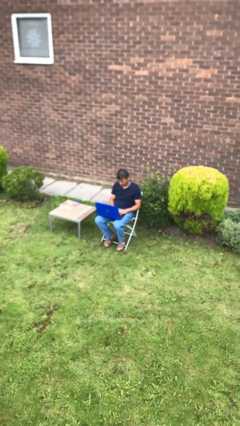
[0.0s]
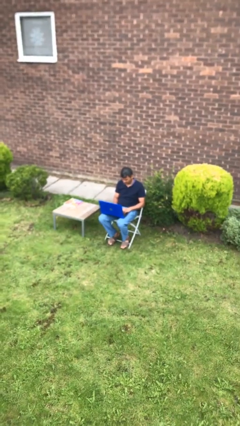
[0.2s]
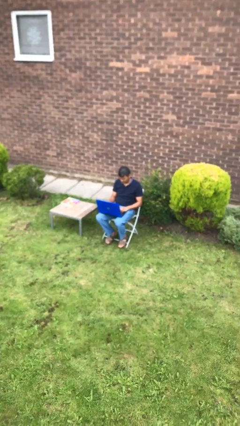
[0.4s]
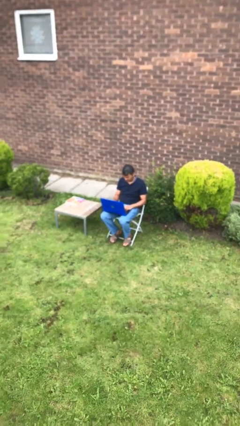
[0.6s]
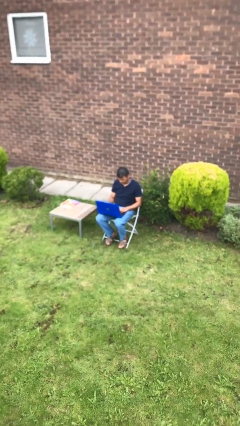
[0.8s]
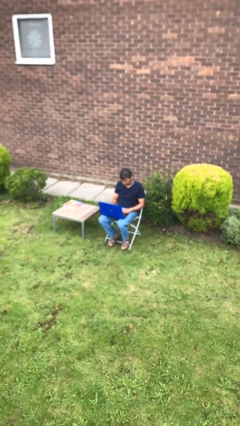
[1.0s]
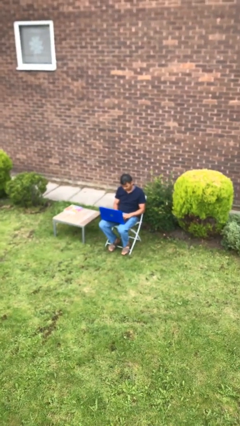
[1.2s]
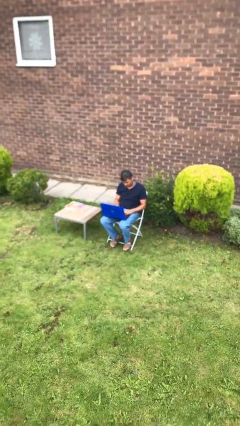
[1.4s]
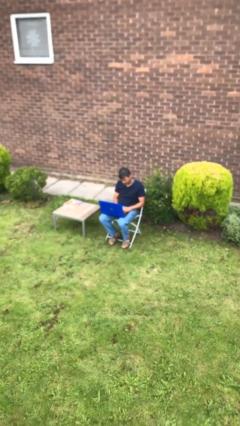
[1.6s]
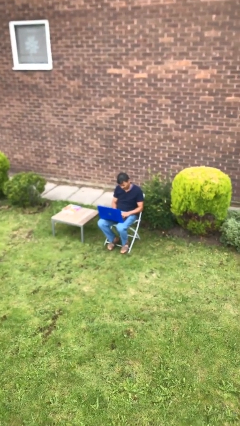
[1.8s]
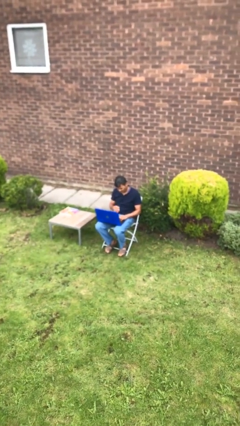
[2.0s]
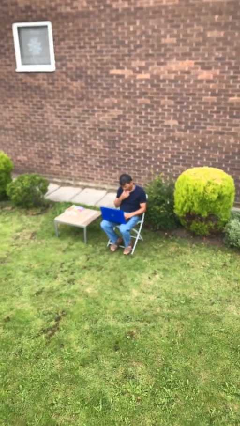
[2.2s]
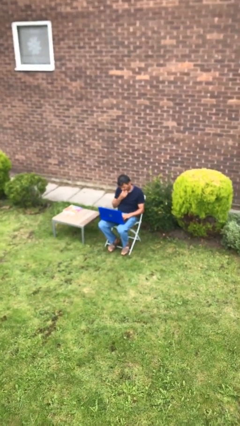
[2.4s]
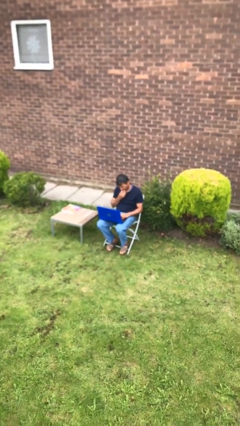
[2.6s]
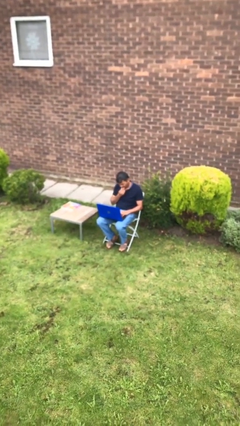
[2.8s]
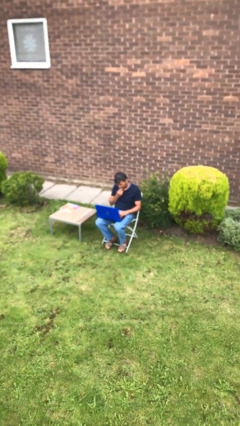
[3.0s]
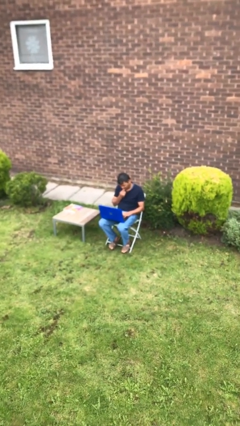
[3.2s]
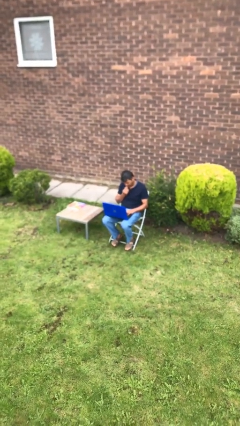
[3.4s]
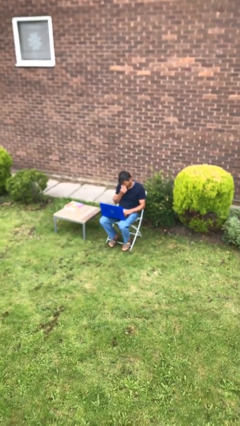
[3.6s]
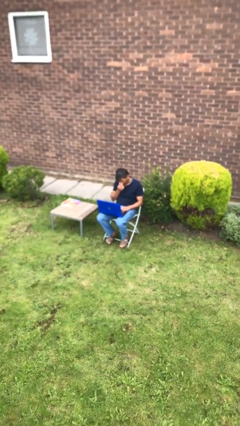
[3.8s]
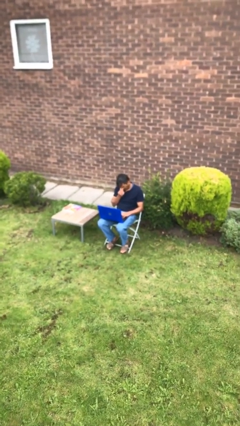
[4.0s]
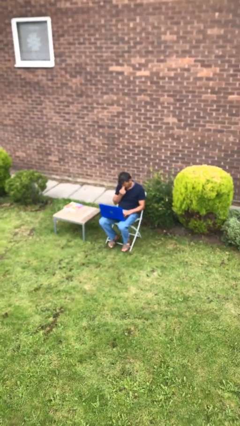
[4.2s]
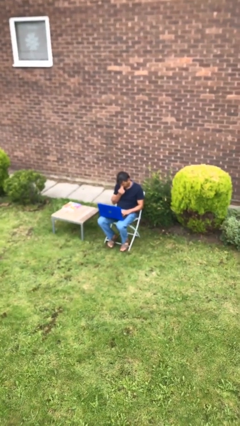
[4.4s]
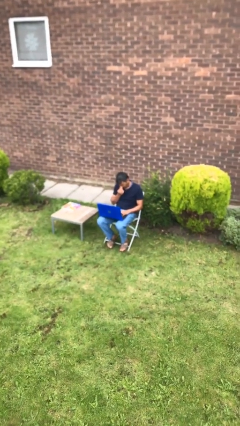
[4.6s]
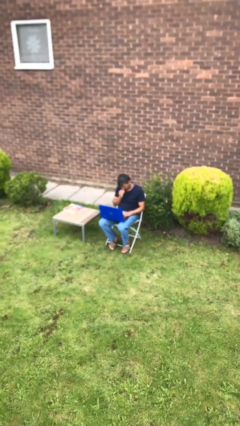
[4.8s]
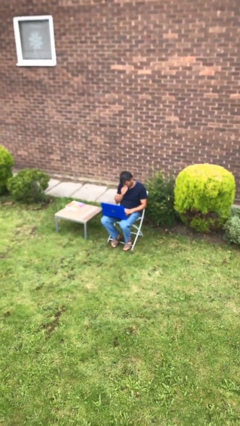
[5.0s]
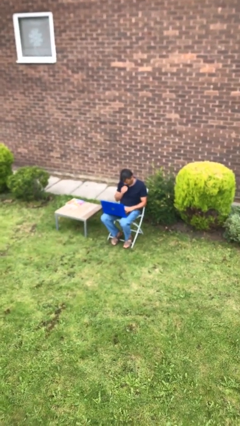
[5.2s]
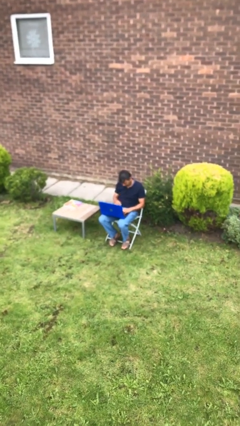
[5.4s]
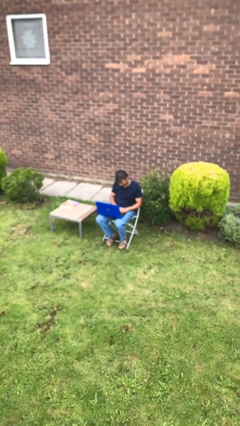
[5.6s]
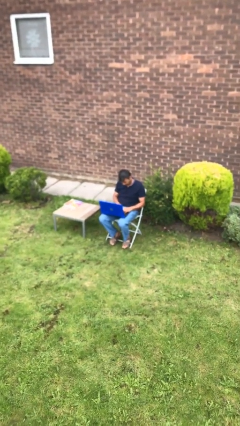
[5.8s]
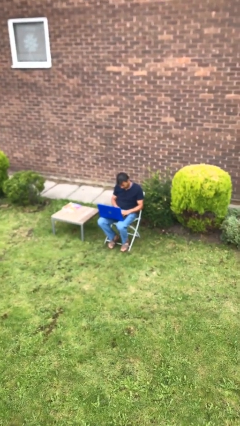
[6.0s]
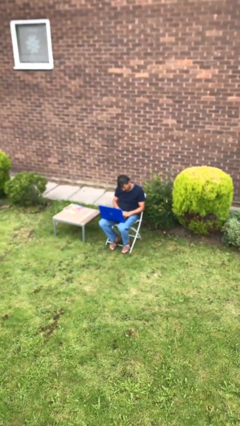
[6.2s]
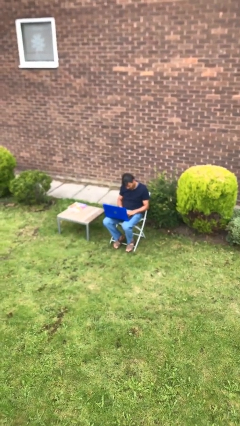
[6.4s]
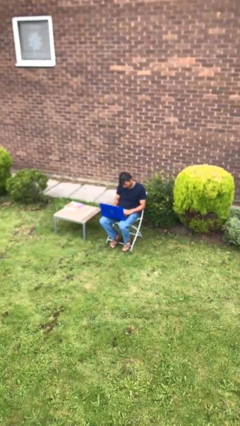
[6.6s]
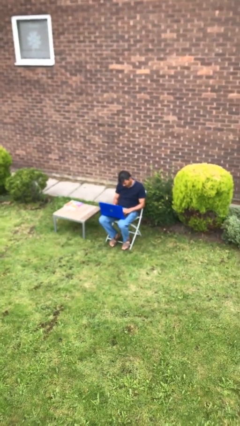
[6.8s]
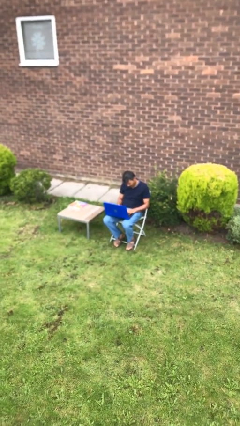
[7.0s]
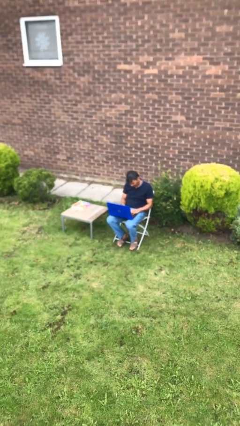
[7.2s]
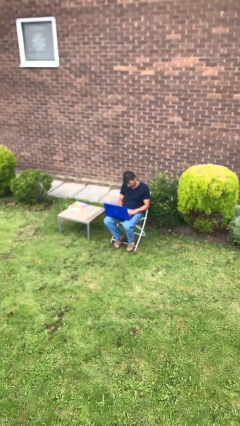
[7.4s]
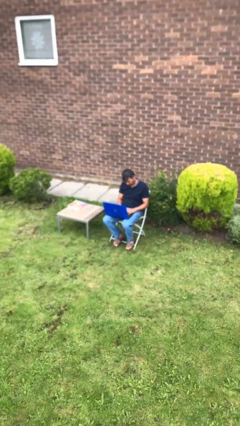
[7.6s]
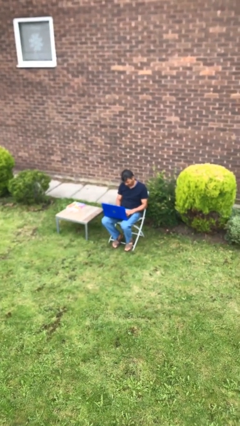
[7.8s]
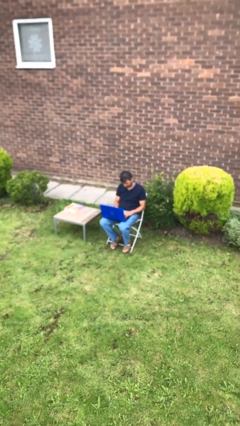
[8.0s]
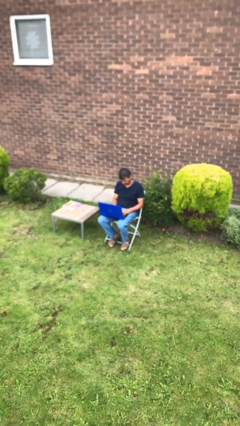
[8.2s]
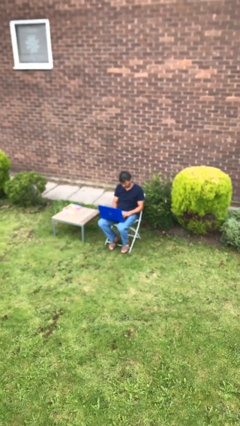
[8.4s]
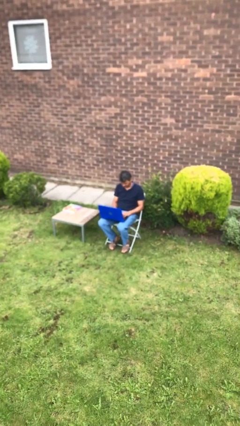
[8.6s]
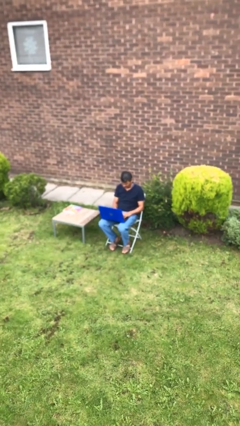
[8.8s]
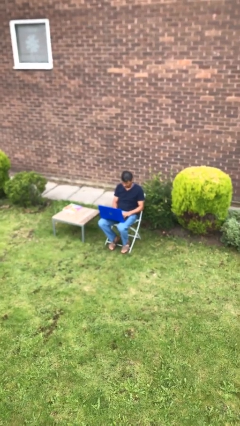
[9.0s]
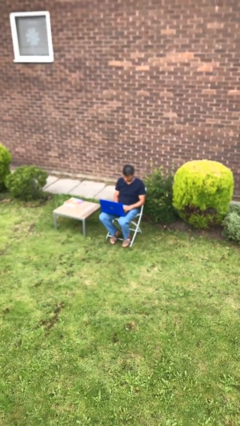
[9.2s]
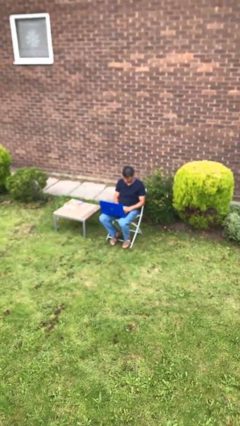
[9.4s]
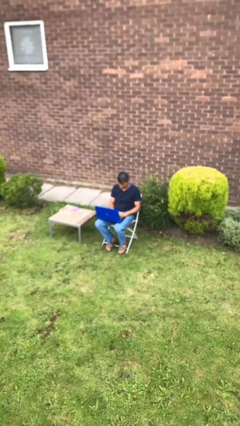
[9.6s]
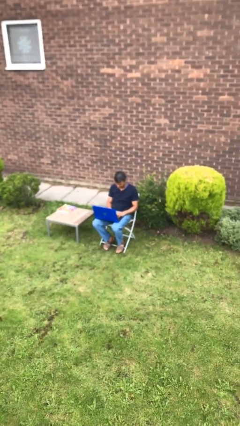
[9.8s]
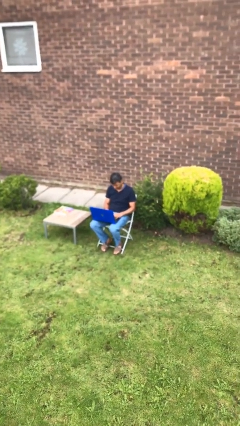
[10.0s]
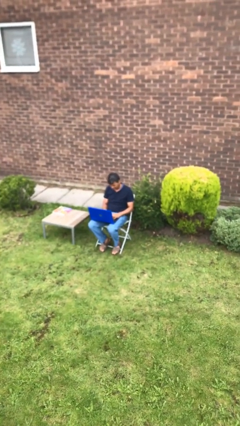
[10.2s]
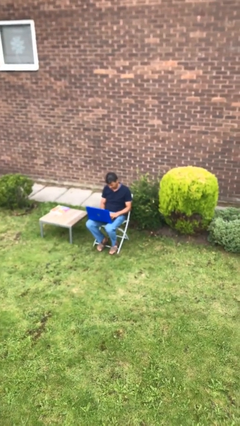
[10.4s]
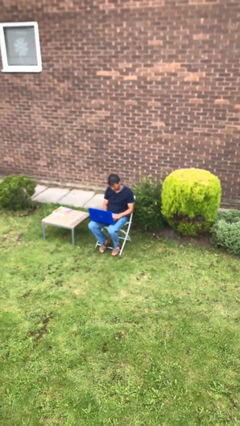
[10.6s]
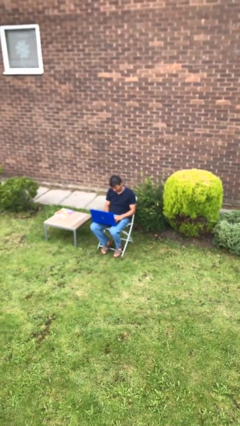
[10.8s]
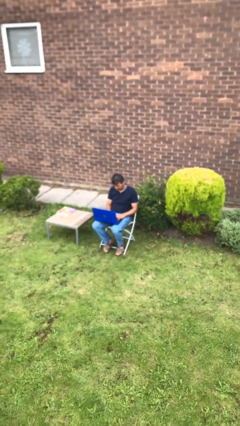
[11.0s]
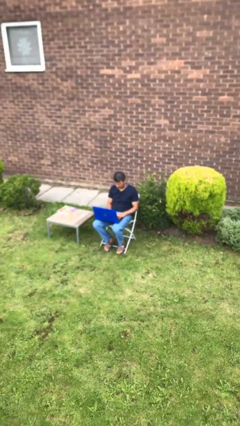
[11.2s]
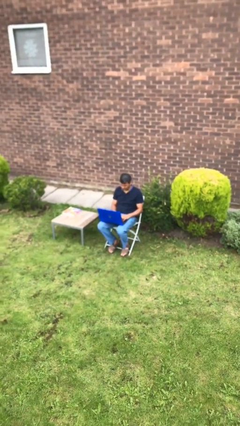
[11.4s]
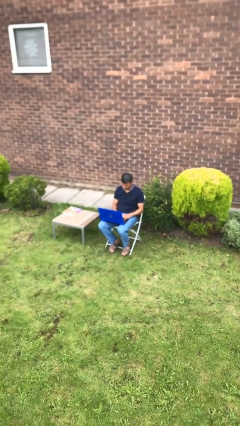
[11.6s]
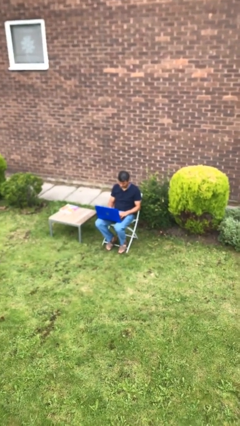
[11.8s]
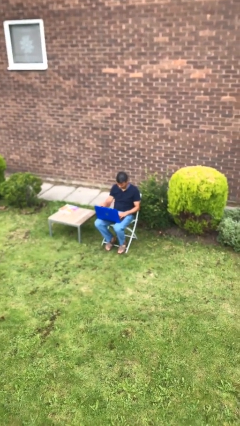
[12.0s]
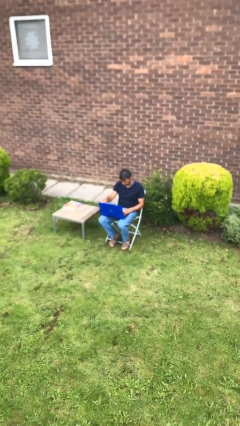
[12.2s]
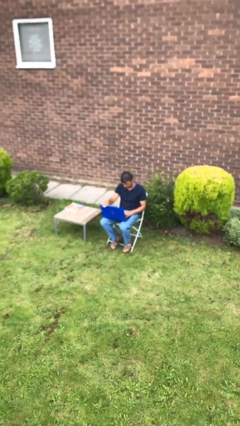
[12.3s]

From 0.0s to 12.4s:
person interacts with laptop

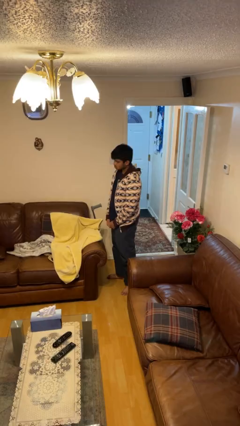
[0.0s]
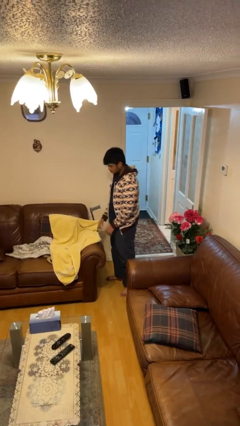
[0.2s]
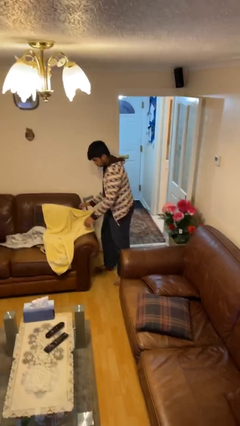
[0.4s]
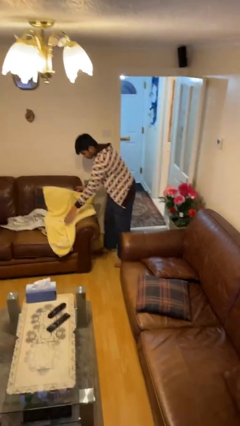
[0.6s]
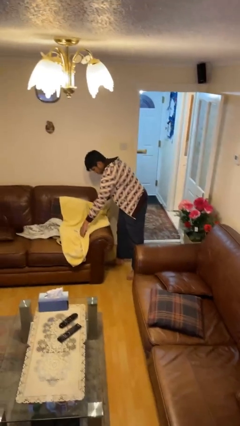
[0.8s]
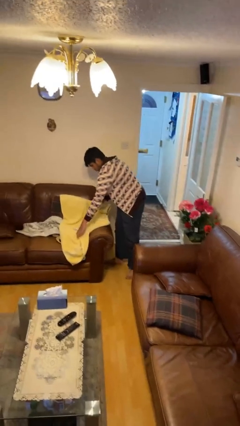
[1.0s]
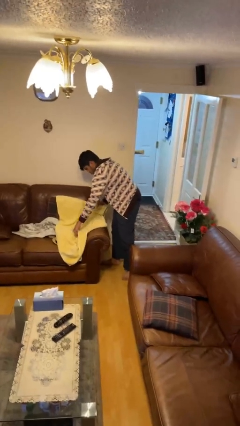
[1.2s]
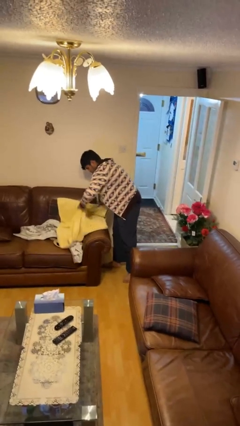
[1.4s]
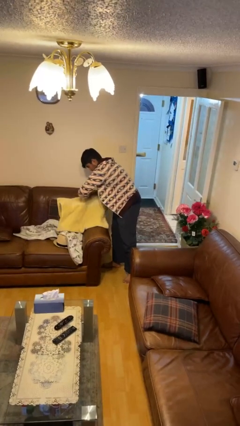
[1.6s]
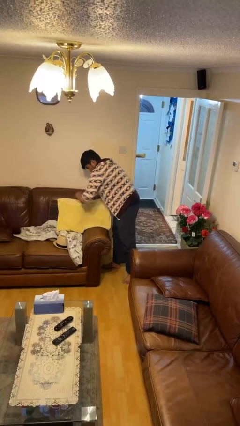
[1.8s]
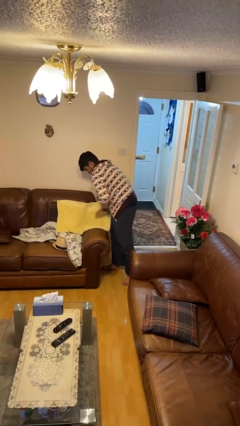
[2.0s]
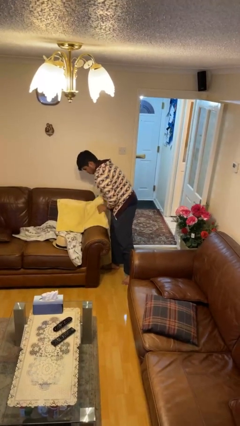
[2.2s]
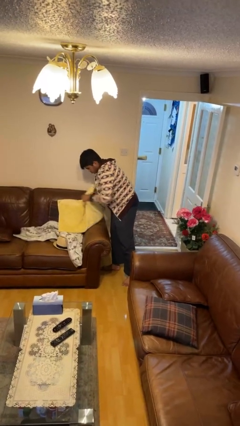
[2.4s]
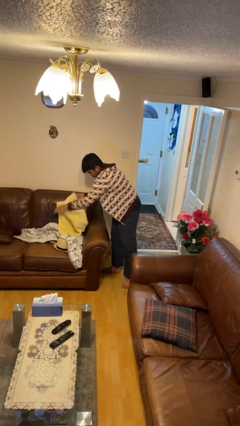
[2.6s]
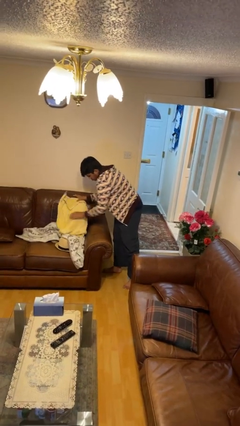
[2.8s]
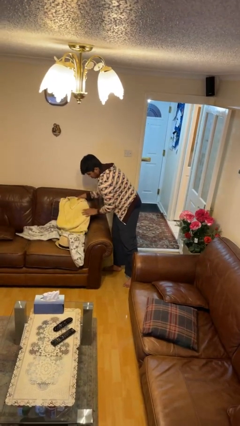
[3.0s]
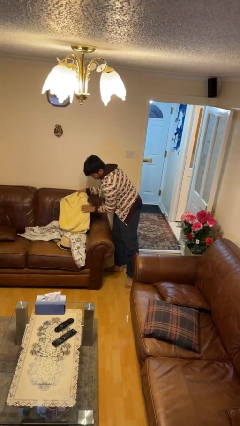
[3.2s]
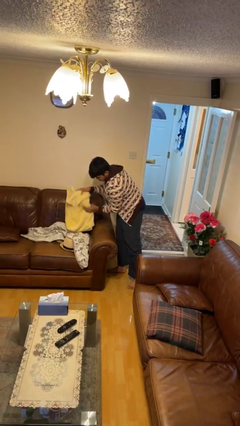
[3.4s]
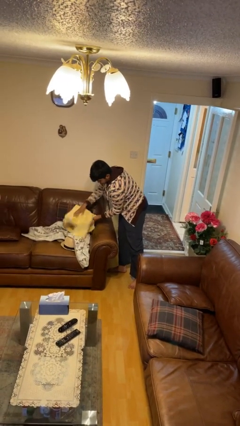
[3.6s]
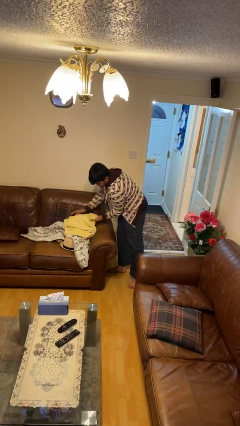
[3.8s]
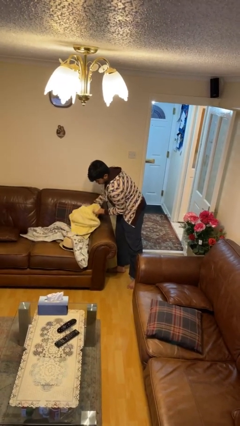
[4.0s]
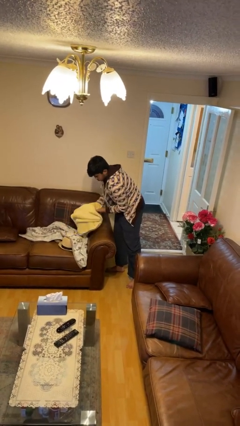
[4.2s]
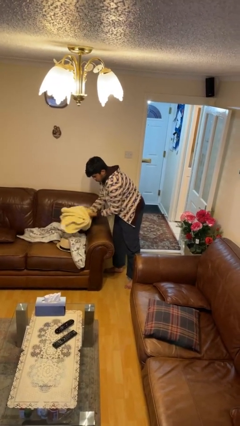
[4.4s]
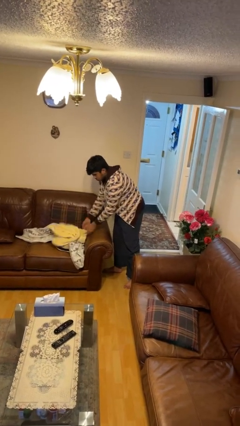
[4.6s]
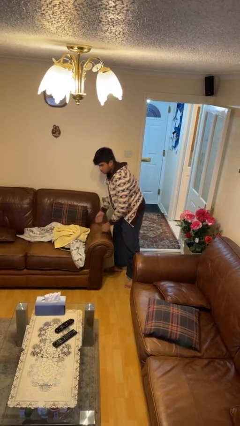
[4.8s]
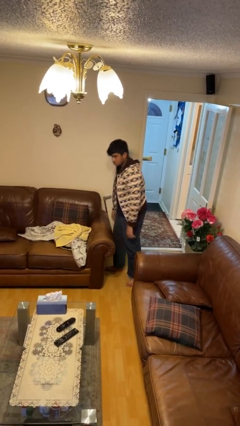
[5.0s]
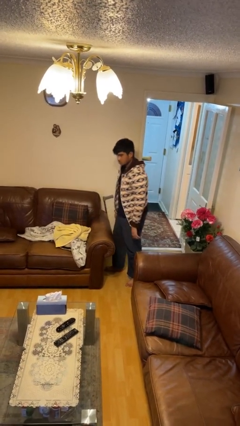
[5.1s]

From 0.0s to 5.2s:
person folds towel

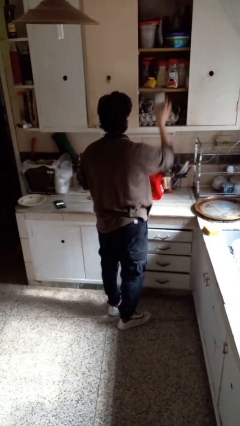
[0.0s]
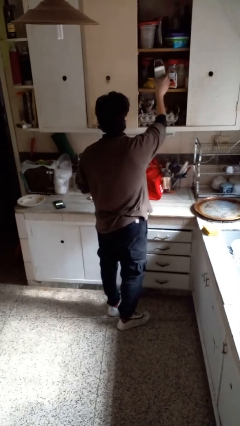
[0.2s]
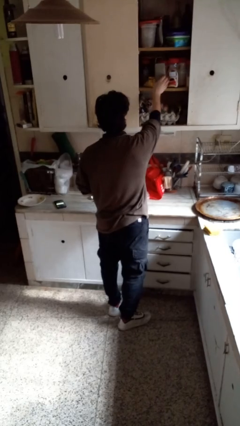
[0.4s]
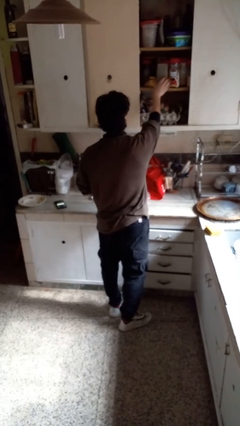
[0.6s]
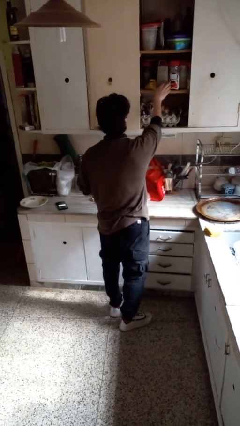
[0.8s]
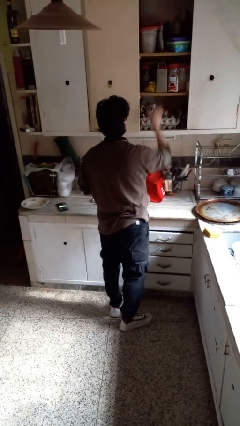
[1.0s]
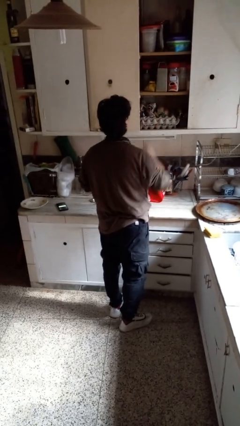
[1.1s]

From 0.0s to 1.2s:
person picks up object from cabinet
